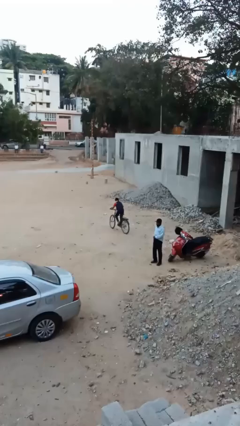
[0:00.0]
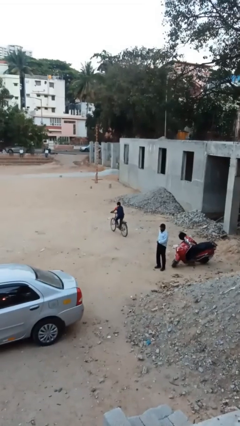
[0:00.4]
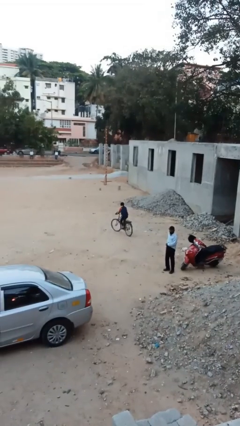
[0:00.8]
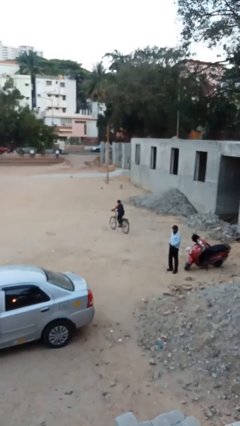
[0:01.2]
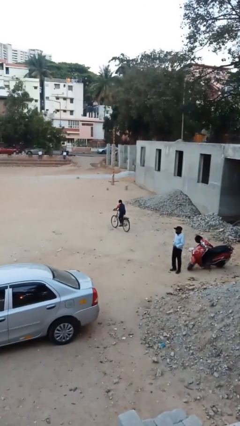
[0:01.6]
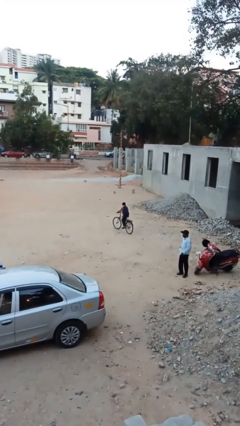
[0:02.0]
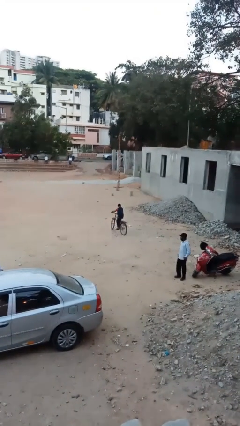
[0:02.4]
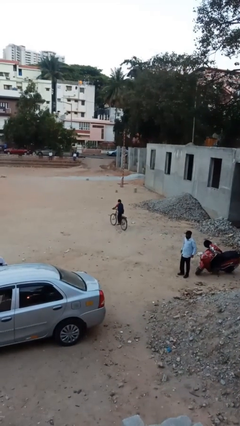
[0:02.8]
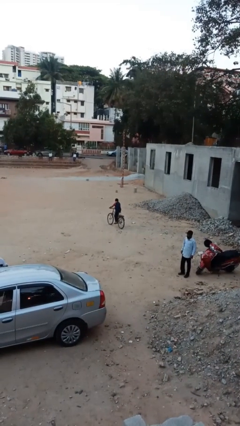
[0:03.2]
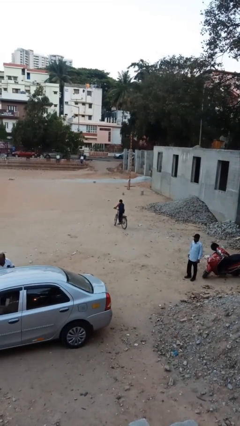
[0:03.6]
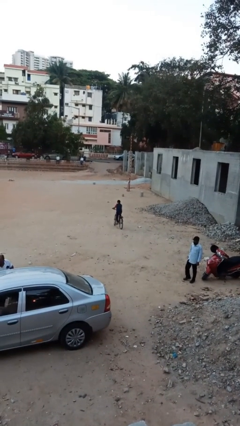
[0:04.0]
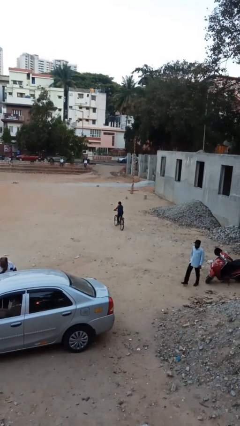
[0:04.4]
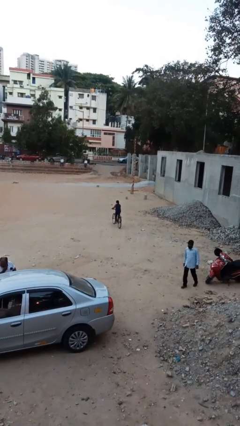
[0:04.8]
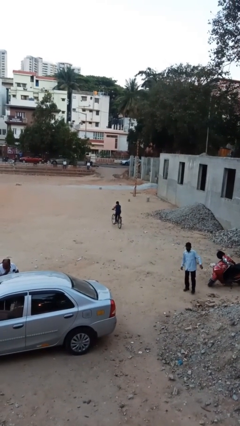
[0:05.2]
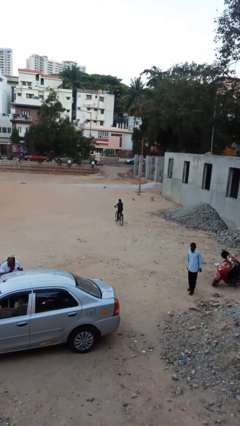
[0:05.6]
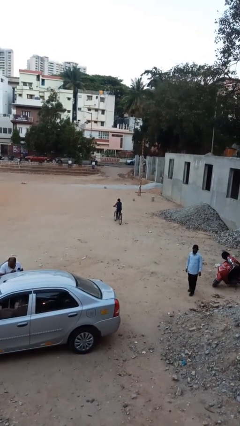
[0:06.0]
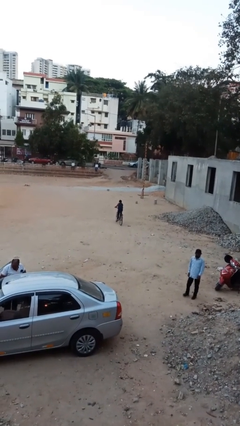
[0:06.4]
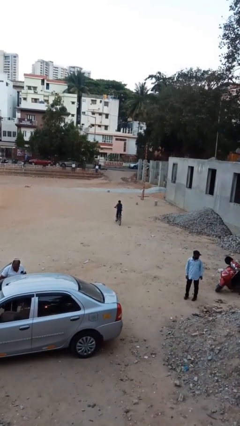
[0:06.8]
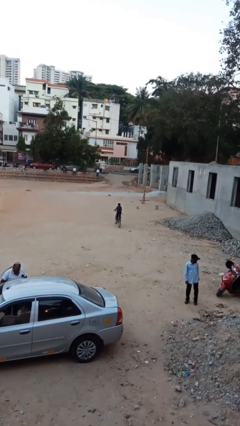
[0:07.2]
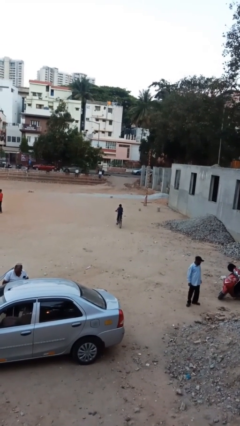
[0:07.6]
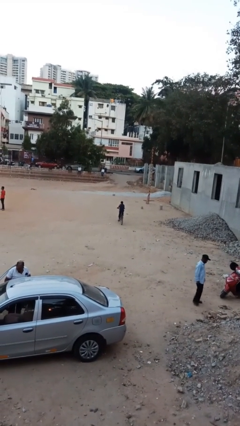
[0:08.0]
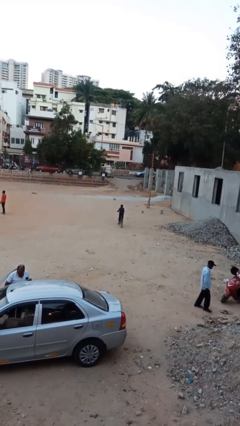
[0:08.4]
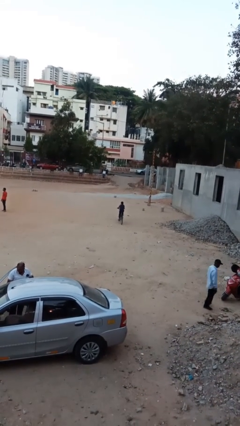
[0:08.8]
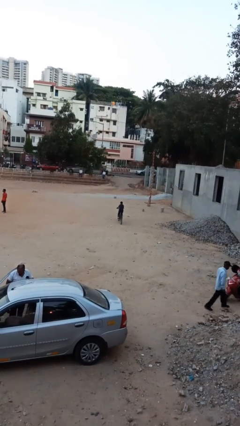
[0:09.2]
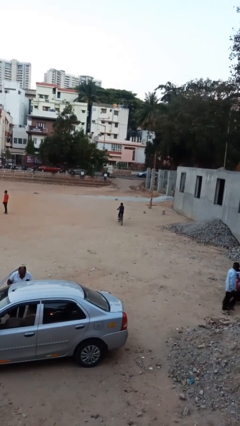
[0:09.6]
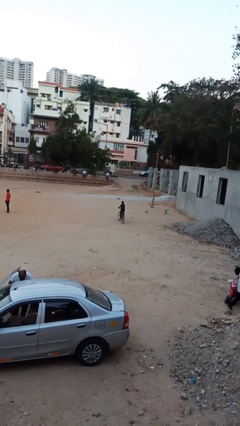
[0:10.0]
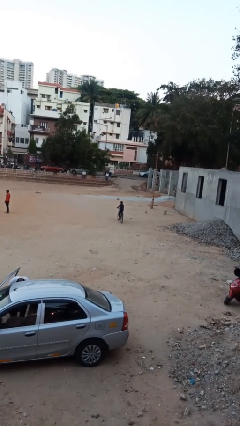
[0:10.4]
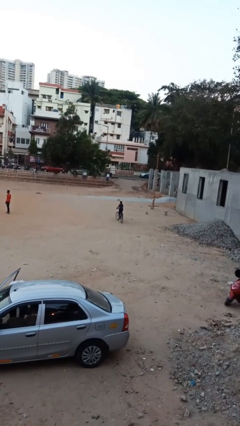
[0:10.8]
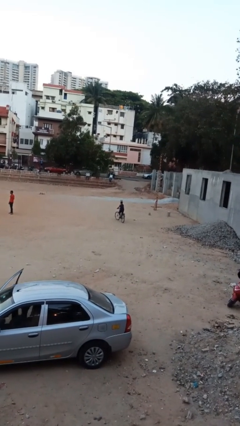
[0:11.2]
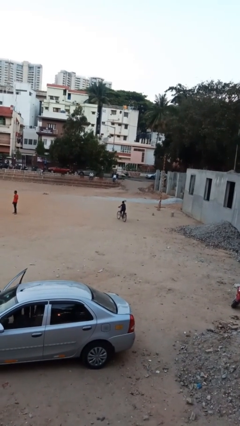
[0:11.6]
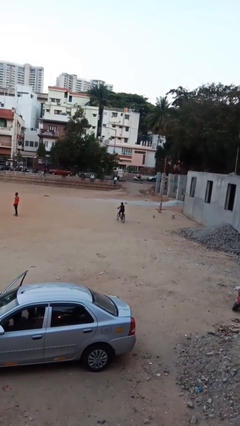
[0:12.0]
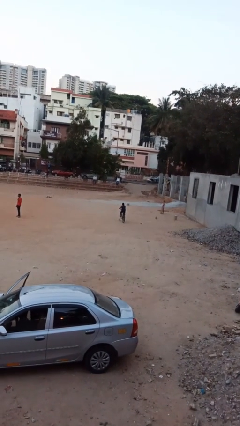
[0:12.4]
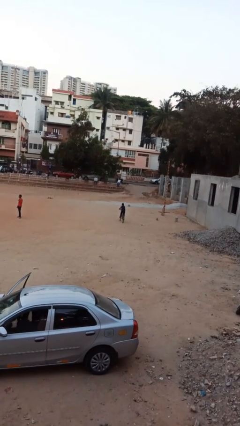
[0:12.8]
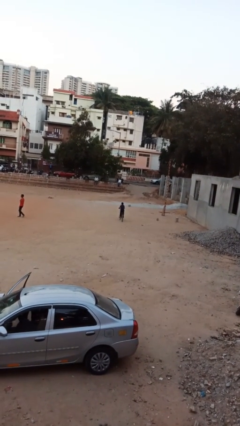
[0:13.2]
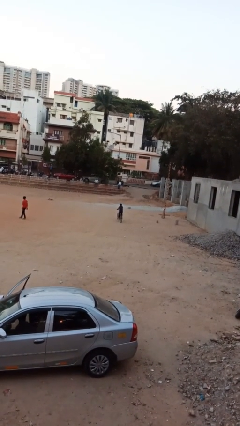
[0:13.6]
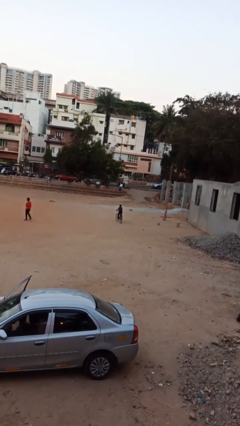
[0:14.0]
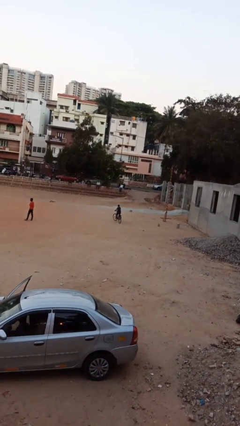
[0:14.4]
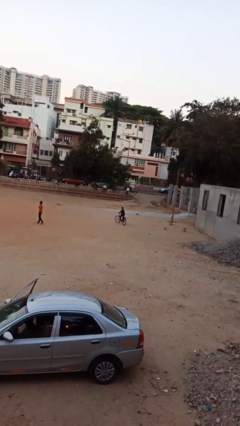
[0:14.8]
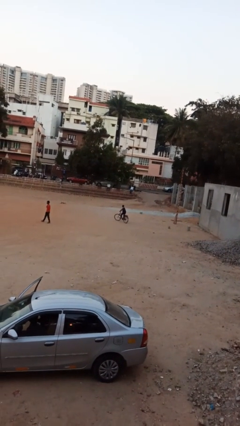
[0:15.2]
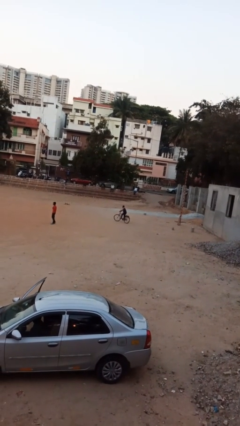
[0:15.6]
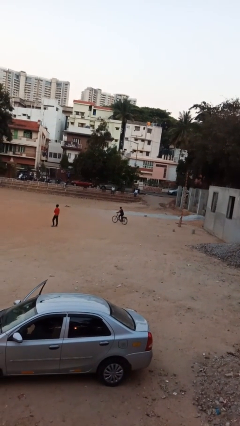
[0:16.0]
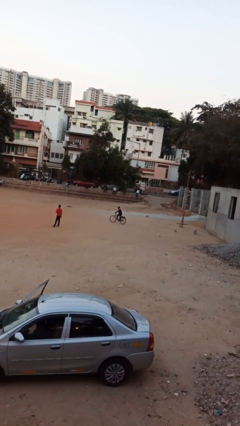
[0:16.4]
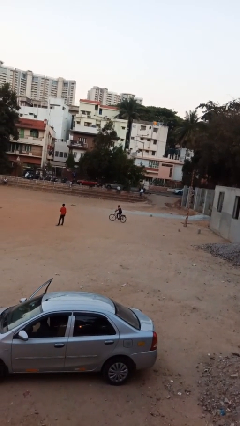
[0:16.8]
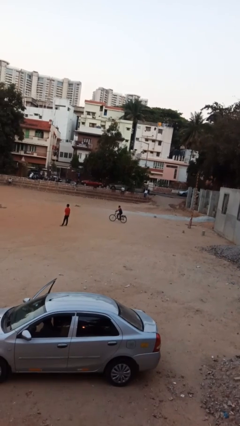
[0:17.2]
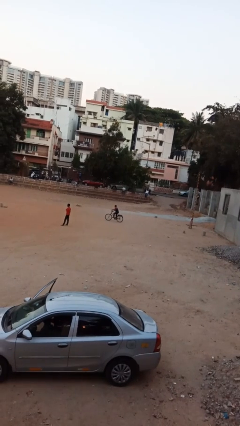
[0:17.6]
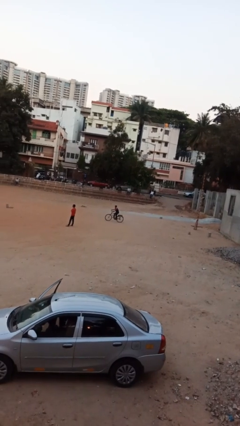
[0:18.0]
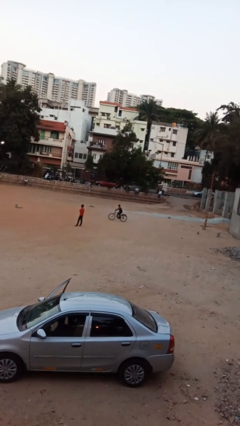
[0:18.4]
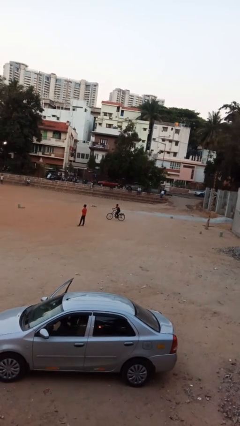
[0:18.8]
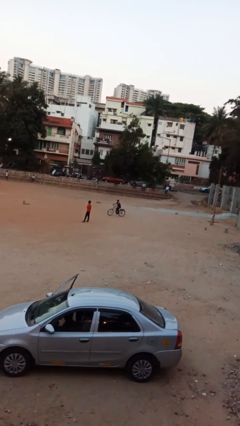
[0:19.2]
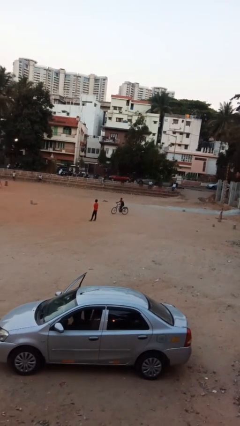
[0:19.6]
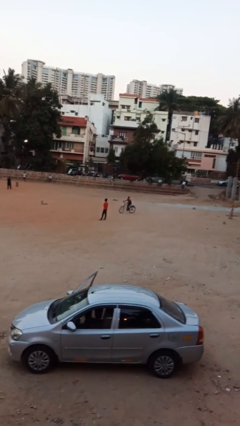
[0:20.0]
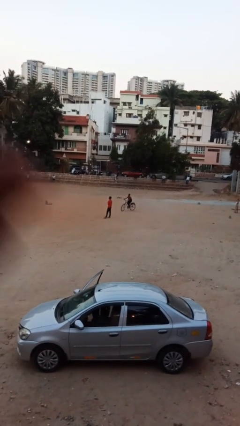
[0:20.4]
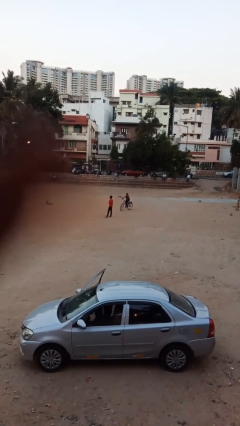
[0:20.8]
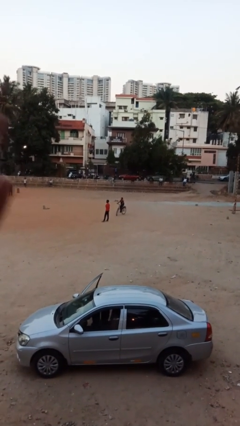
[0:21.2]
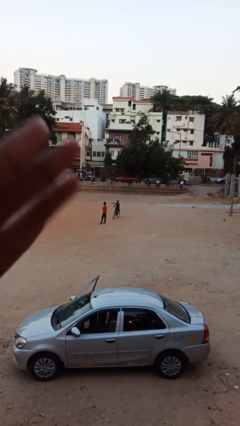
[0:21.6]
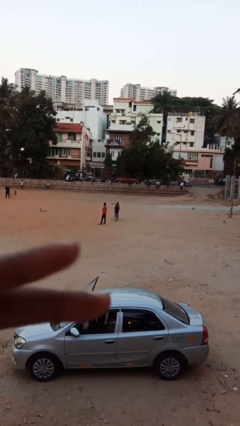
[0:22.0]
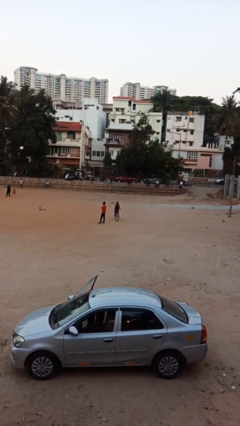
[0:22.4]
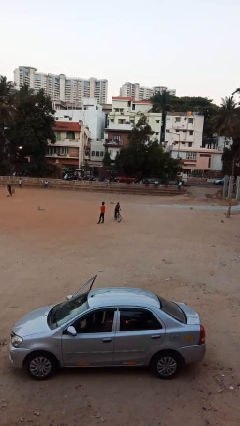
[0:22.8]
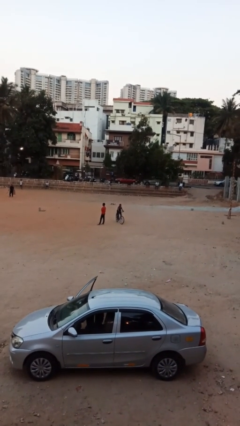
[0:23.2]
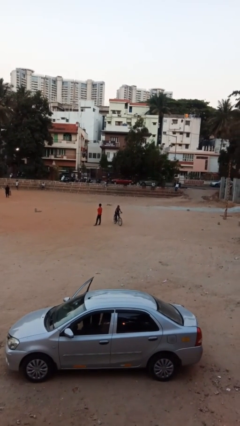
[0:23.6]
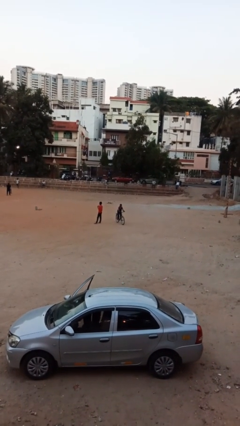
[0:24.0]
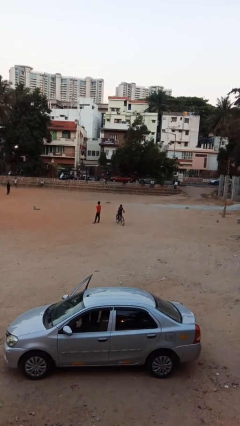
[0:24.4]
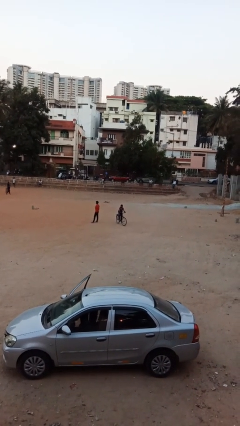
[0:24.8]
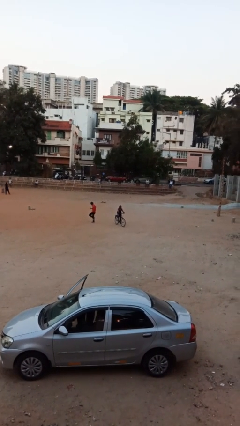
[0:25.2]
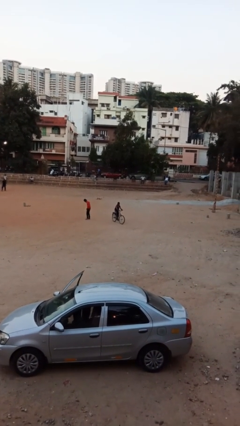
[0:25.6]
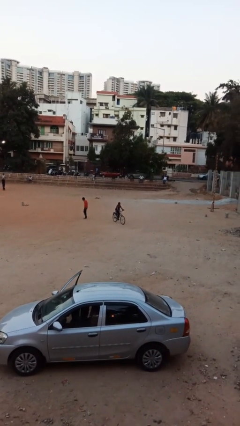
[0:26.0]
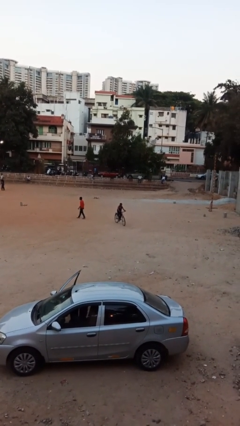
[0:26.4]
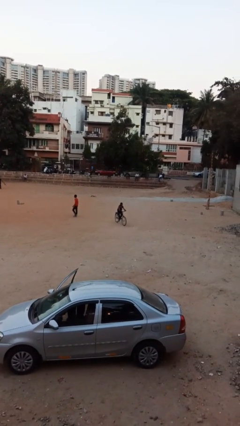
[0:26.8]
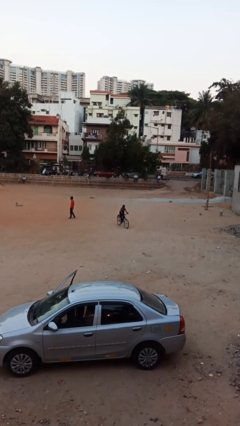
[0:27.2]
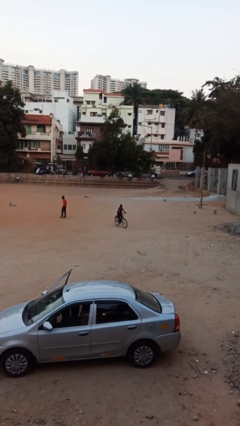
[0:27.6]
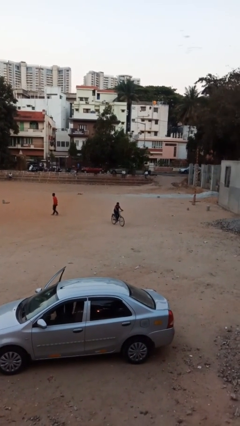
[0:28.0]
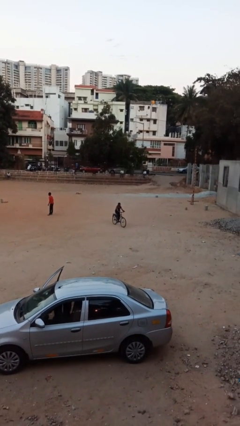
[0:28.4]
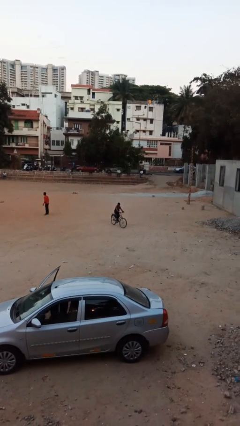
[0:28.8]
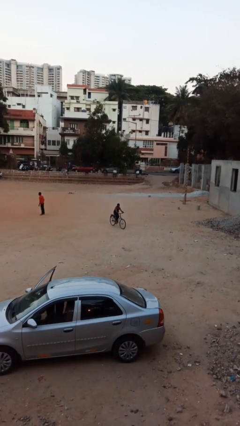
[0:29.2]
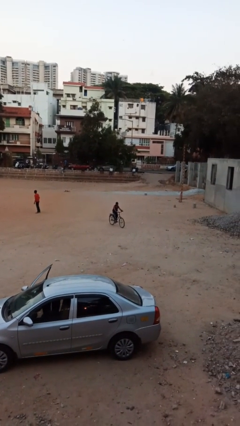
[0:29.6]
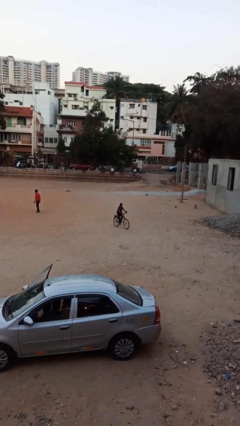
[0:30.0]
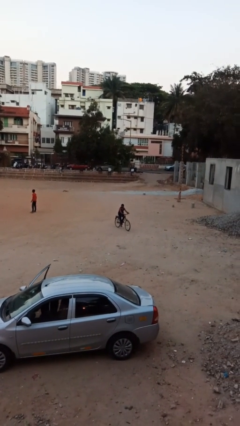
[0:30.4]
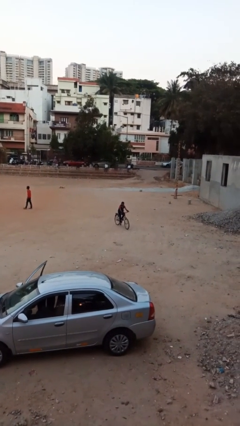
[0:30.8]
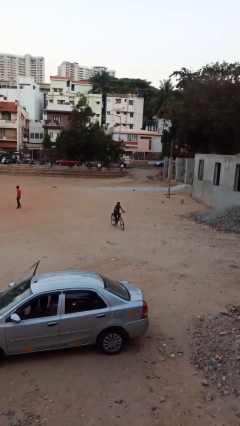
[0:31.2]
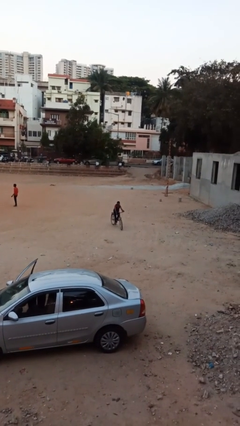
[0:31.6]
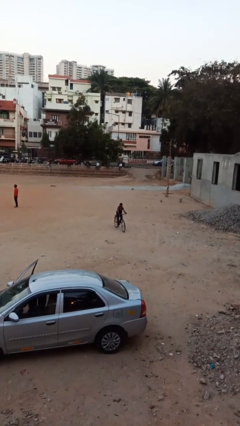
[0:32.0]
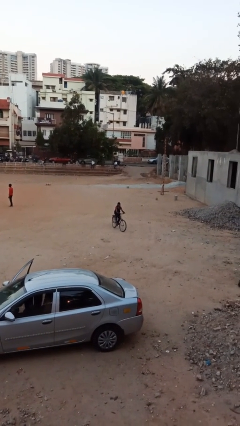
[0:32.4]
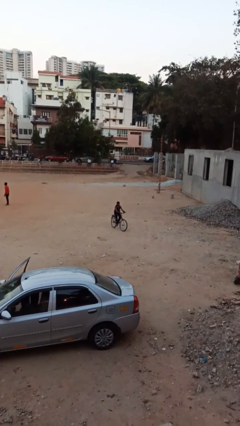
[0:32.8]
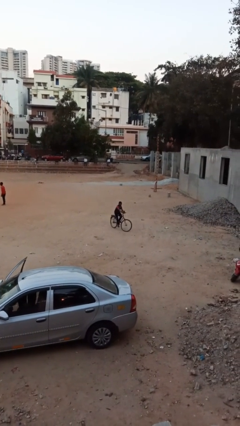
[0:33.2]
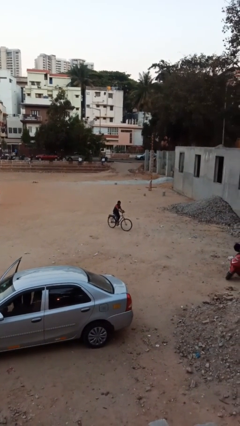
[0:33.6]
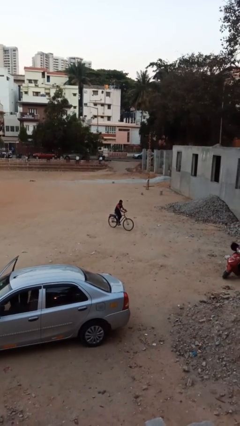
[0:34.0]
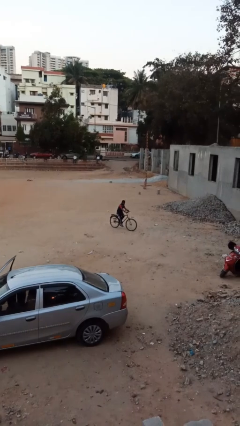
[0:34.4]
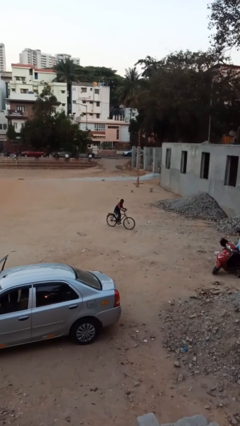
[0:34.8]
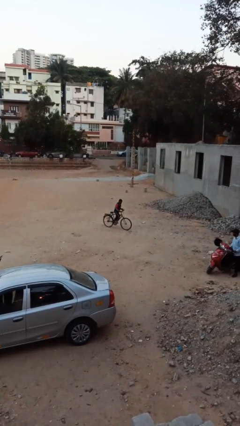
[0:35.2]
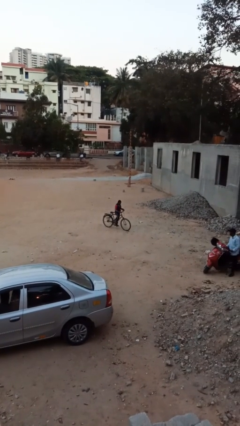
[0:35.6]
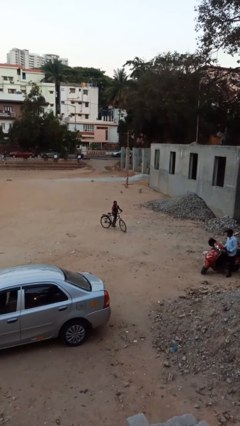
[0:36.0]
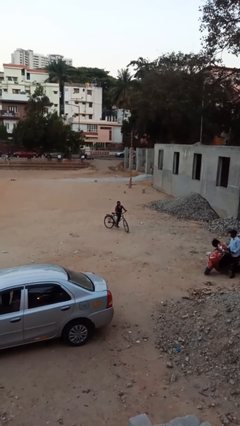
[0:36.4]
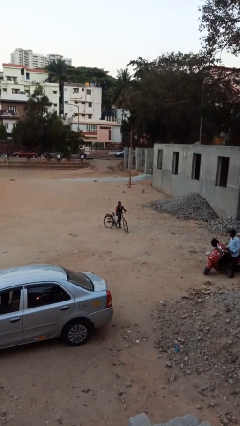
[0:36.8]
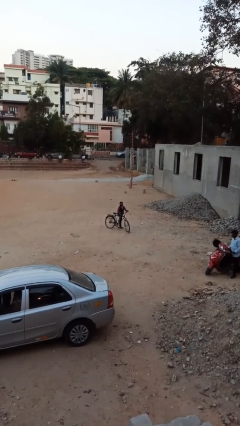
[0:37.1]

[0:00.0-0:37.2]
person rides bicycle
